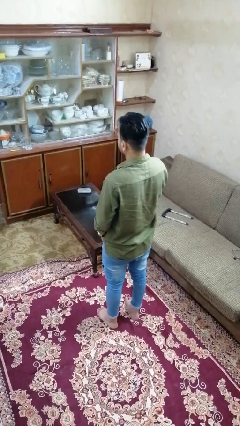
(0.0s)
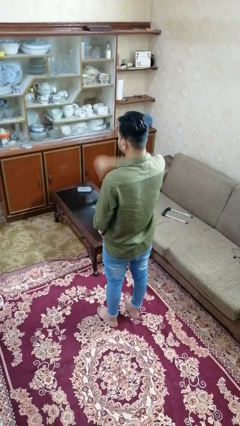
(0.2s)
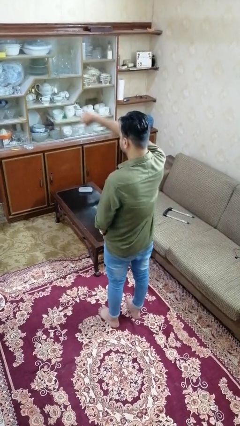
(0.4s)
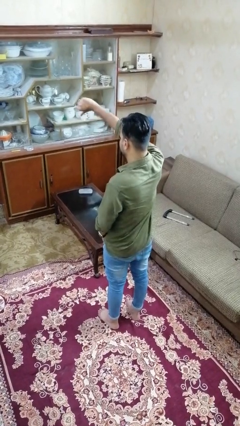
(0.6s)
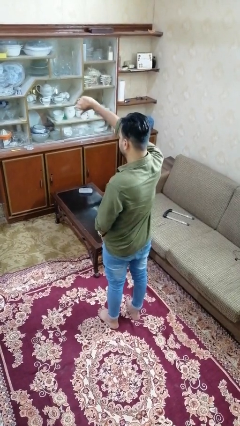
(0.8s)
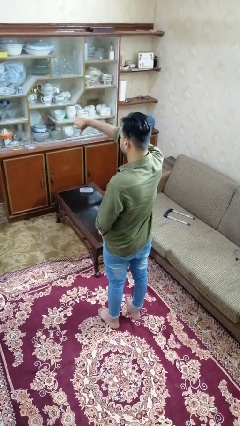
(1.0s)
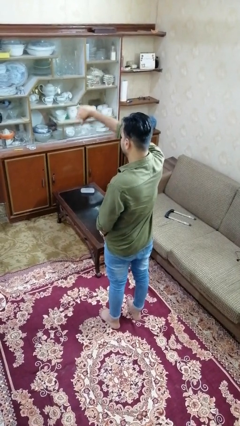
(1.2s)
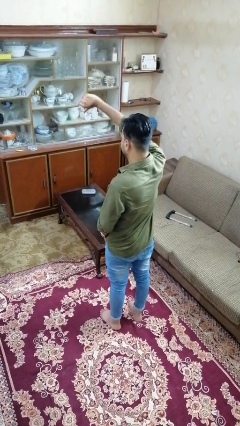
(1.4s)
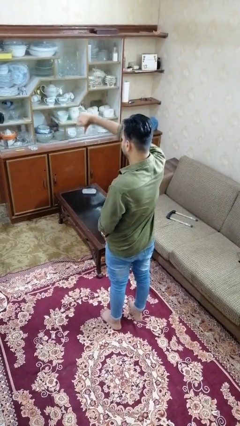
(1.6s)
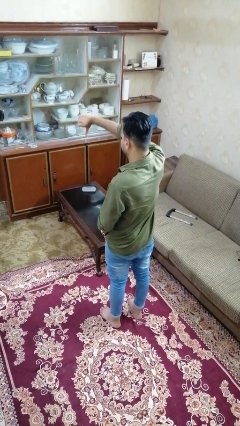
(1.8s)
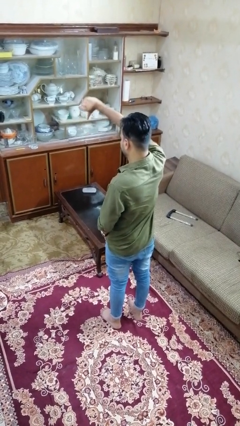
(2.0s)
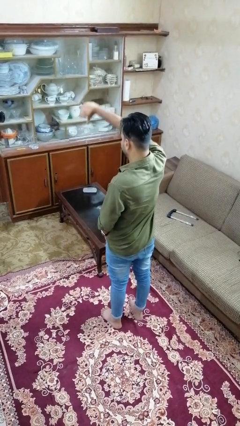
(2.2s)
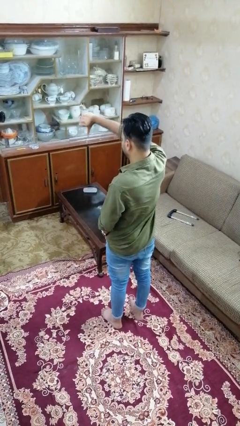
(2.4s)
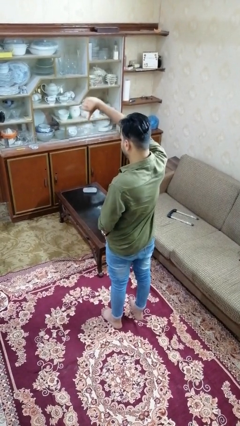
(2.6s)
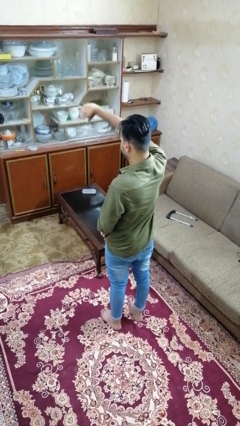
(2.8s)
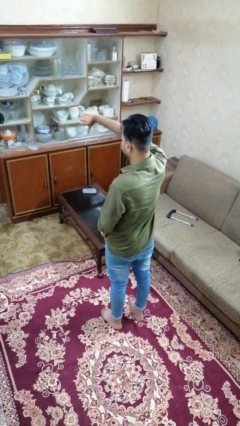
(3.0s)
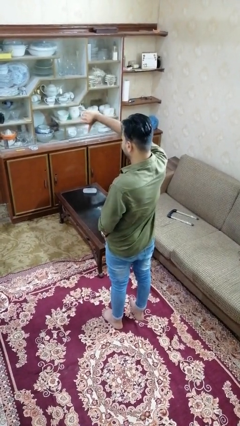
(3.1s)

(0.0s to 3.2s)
person gestures thumbs down

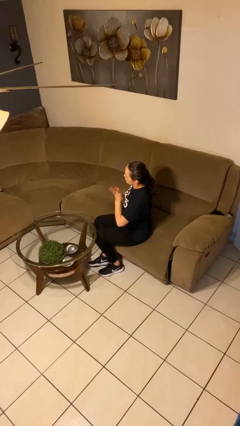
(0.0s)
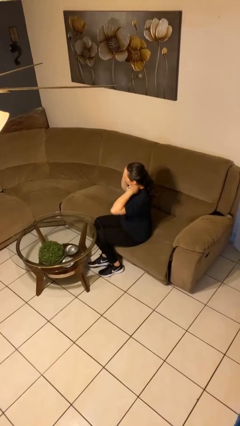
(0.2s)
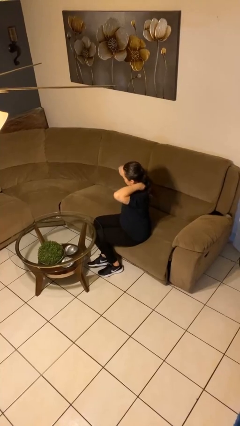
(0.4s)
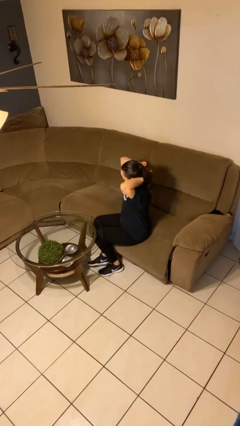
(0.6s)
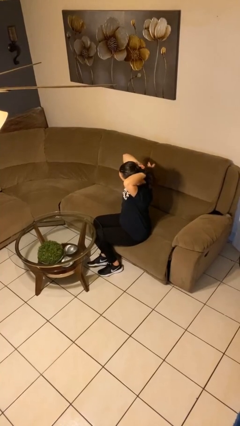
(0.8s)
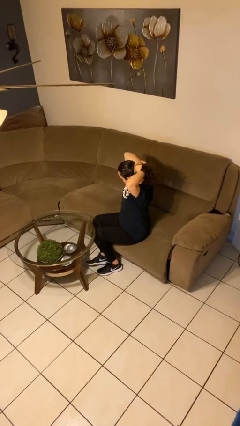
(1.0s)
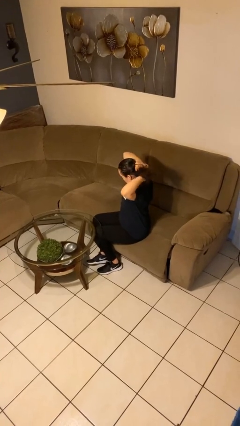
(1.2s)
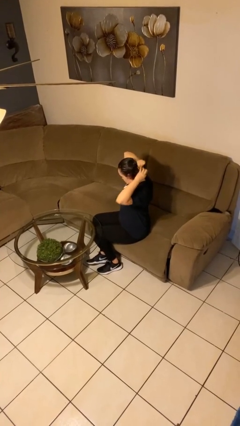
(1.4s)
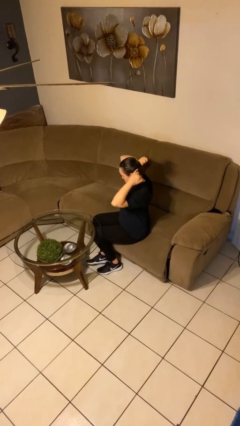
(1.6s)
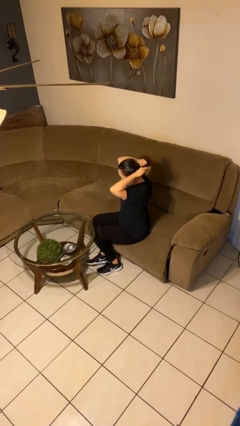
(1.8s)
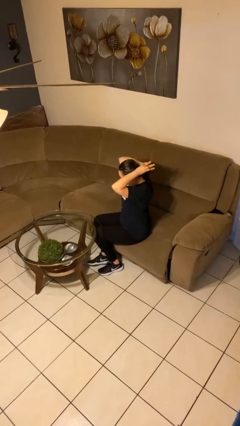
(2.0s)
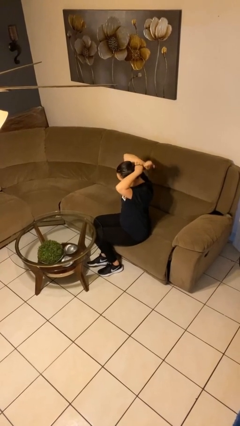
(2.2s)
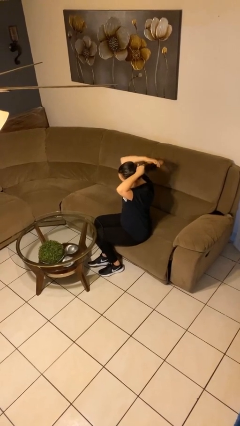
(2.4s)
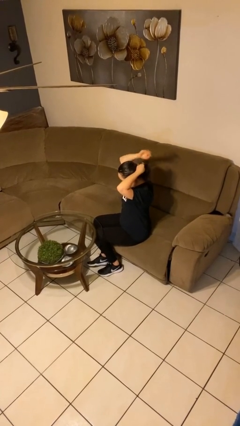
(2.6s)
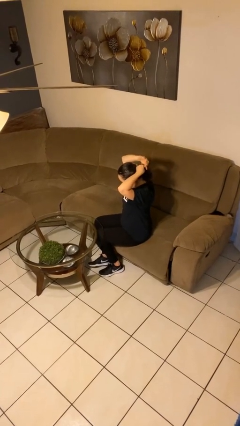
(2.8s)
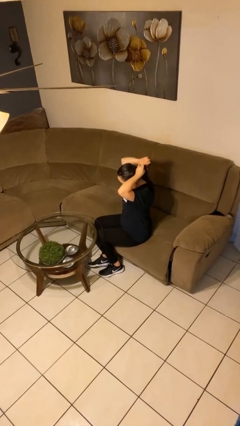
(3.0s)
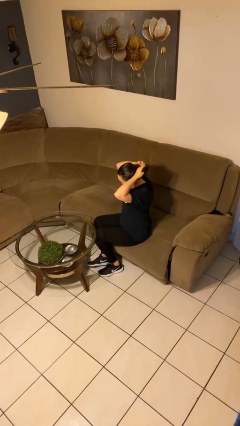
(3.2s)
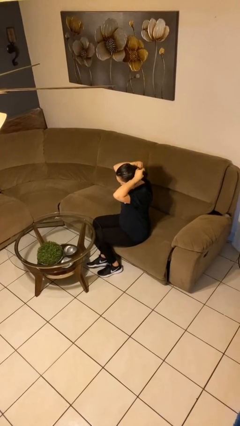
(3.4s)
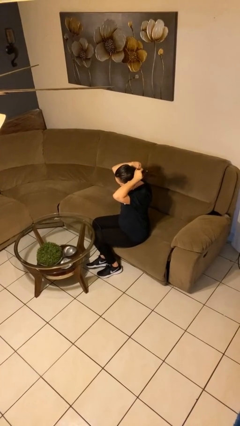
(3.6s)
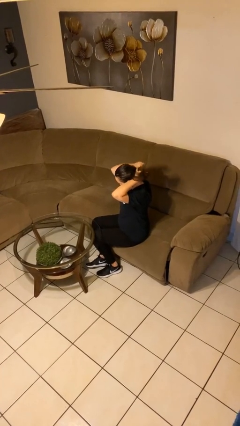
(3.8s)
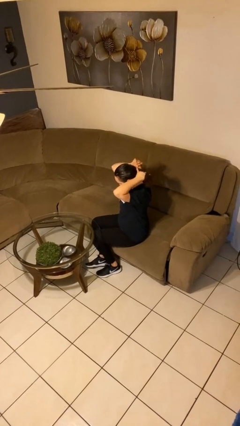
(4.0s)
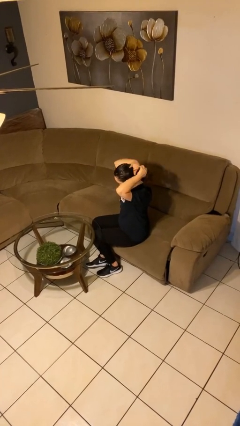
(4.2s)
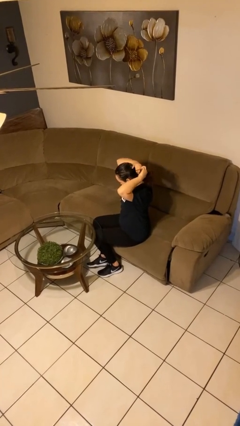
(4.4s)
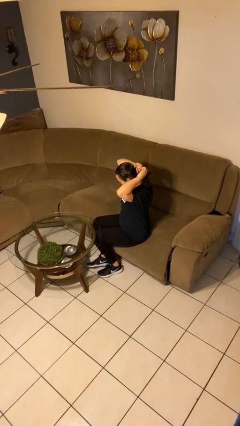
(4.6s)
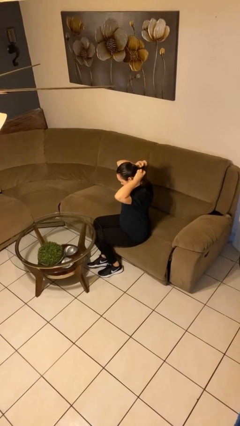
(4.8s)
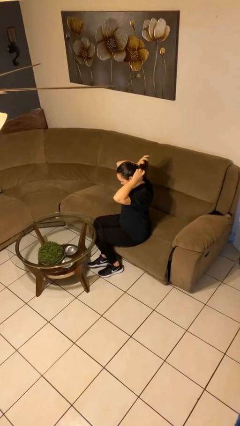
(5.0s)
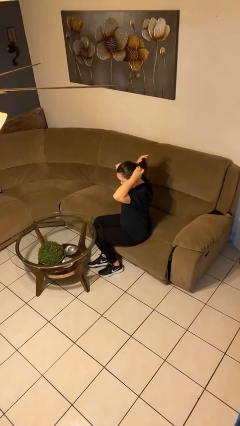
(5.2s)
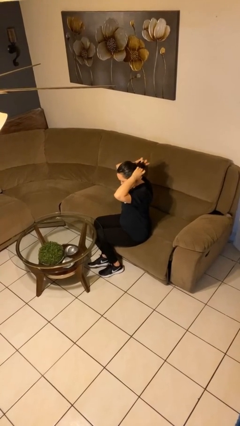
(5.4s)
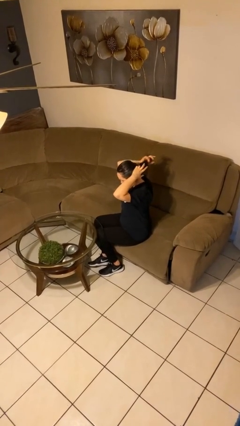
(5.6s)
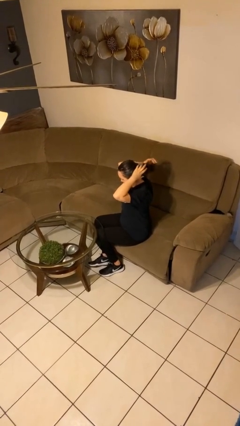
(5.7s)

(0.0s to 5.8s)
person puts hair in ponytail

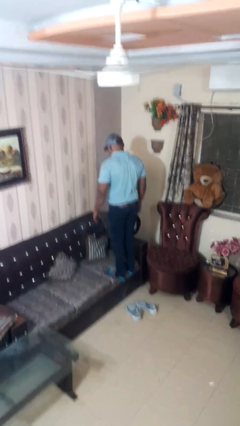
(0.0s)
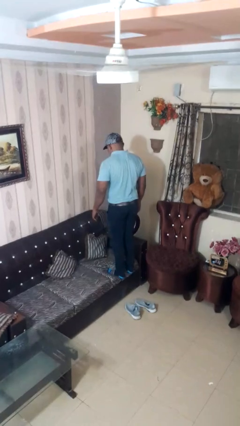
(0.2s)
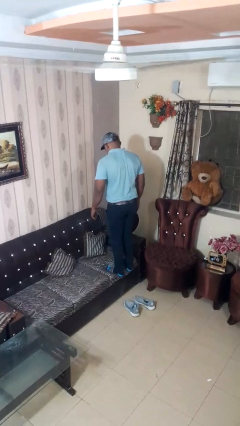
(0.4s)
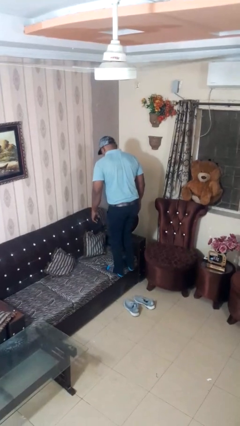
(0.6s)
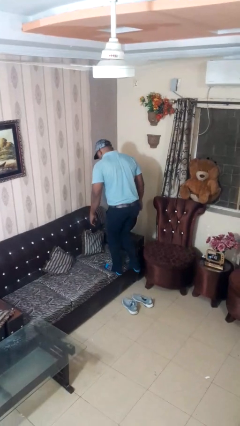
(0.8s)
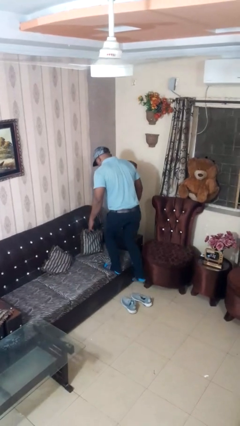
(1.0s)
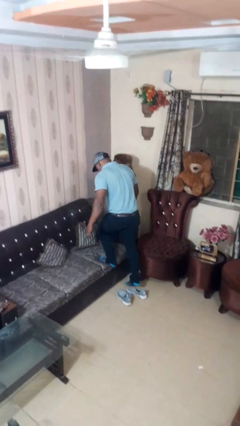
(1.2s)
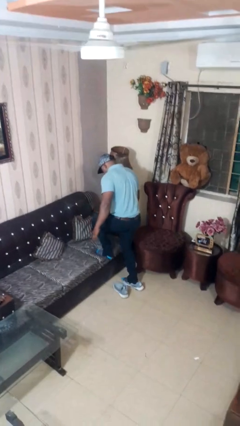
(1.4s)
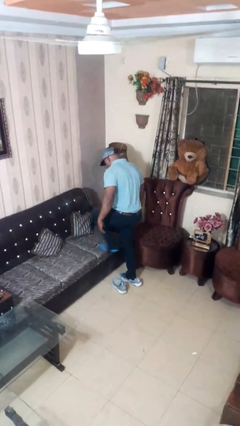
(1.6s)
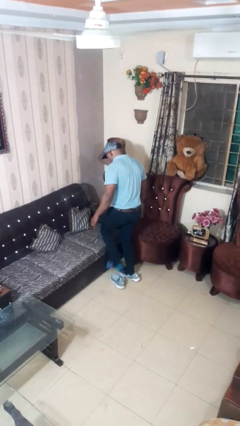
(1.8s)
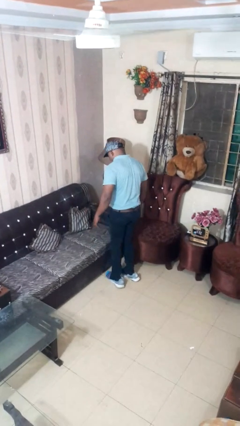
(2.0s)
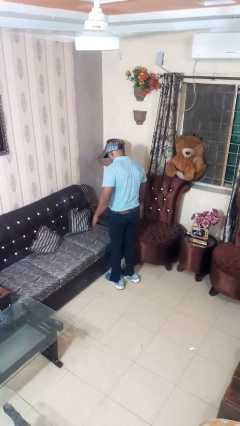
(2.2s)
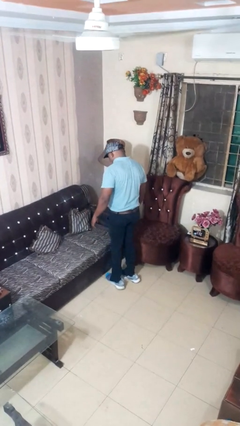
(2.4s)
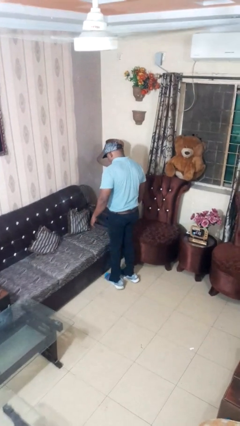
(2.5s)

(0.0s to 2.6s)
person climbs off couch

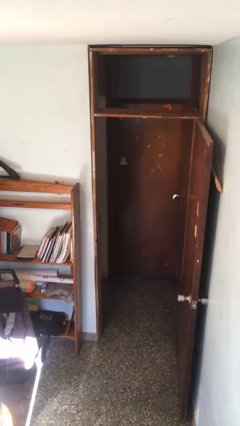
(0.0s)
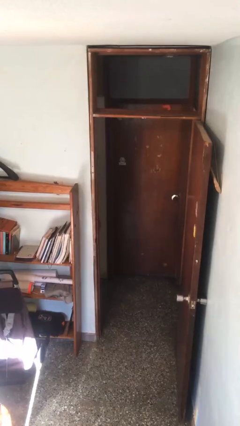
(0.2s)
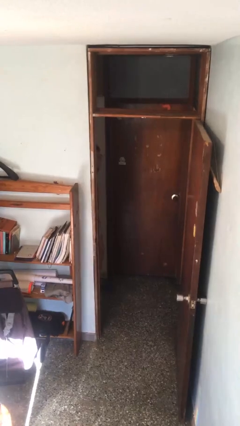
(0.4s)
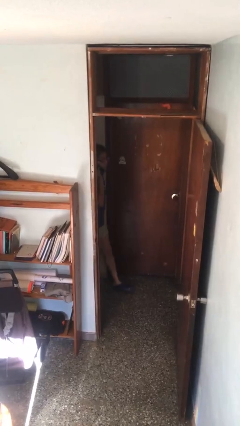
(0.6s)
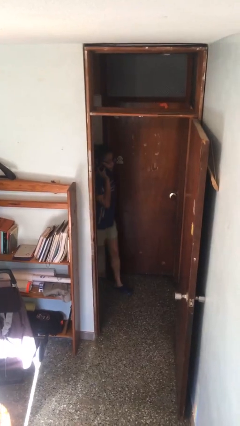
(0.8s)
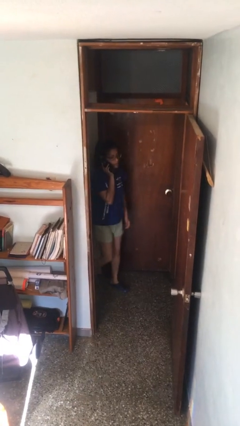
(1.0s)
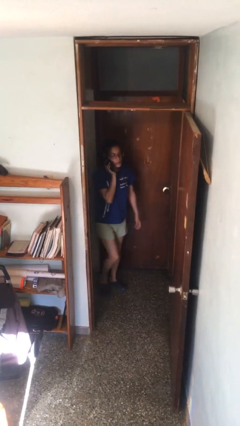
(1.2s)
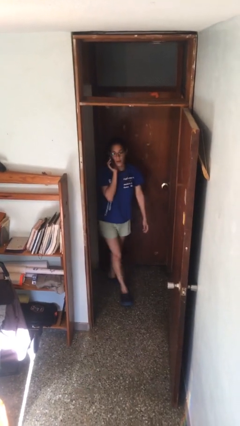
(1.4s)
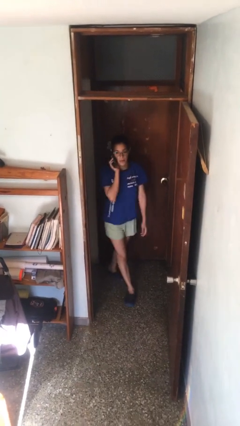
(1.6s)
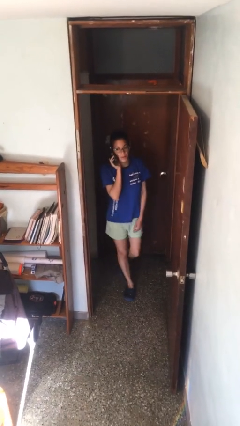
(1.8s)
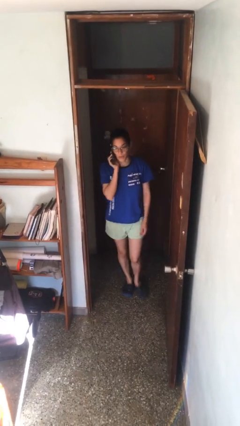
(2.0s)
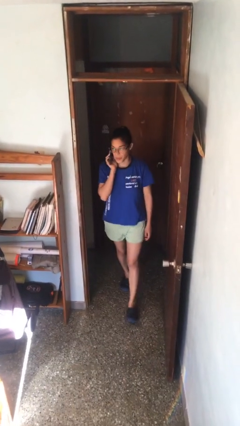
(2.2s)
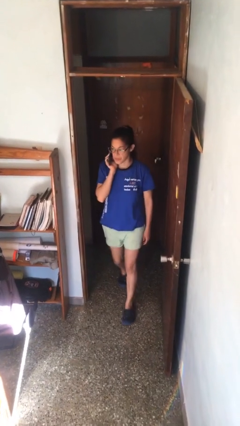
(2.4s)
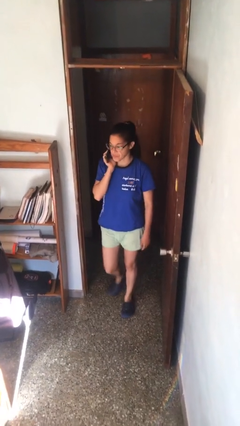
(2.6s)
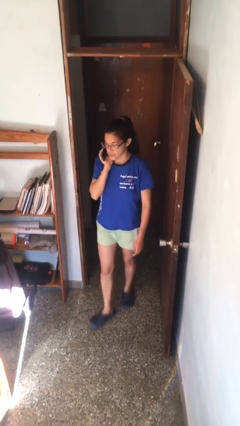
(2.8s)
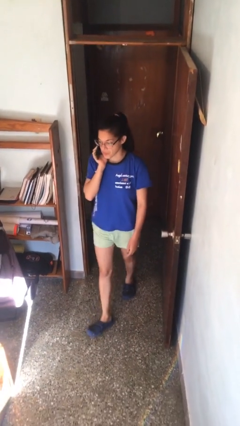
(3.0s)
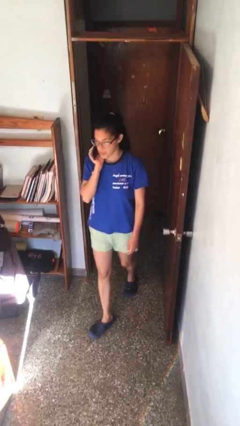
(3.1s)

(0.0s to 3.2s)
person enters scene through structure

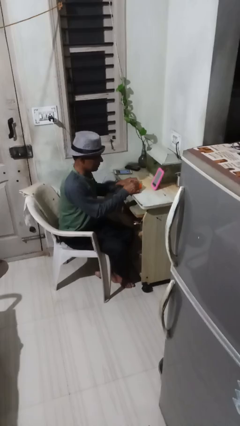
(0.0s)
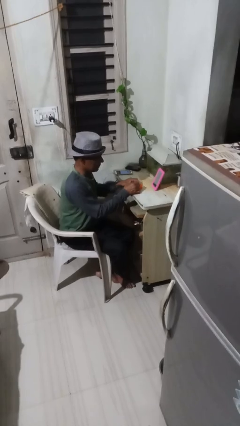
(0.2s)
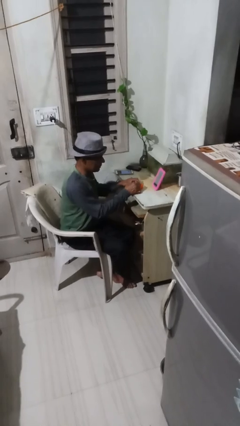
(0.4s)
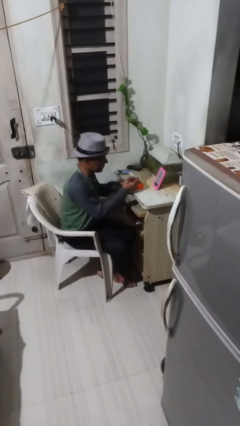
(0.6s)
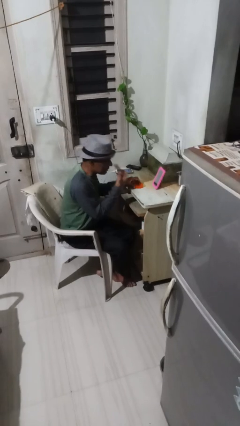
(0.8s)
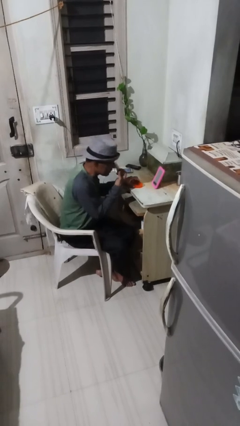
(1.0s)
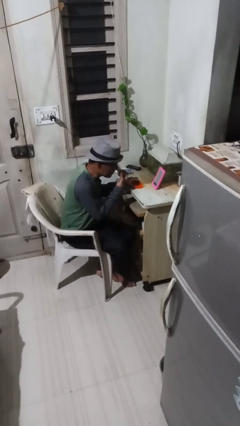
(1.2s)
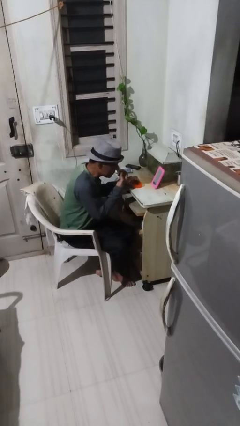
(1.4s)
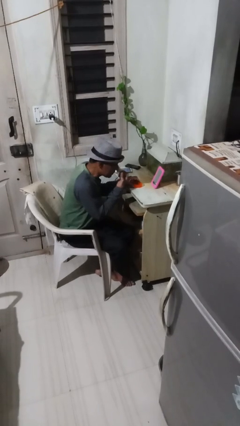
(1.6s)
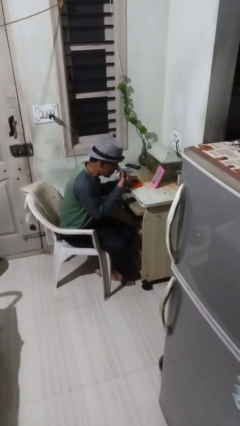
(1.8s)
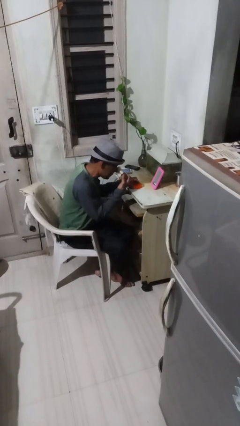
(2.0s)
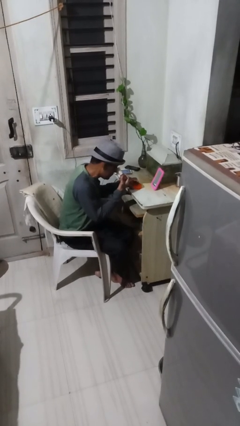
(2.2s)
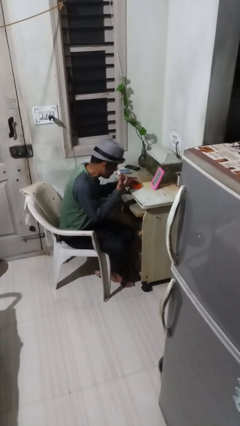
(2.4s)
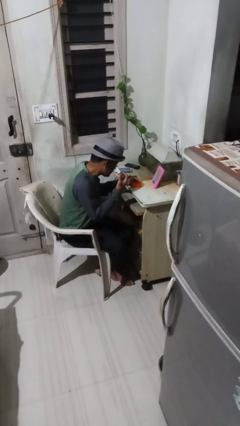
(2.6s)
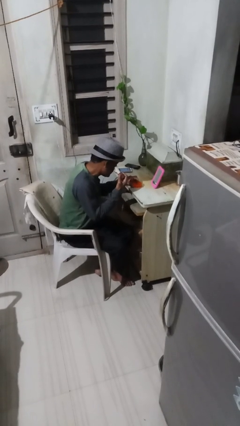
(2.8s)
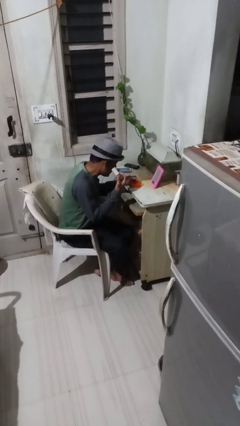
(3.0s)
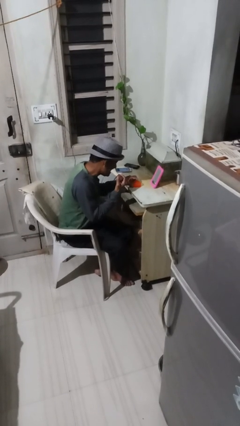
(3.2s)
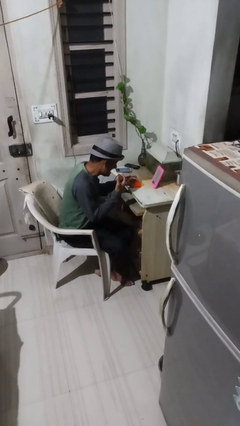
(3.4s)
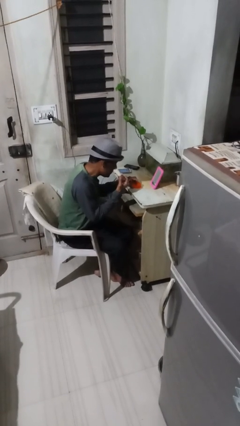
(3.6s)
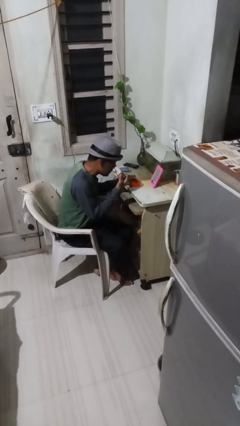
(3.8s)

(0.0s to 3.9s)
person applies foundation makeup
